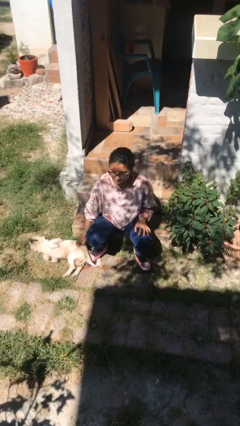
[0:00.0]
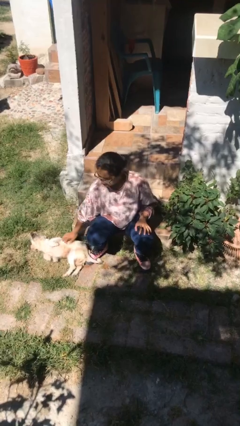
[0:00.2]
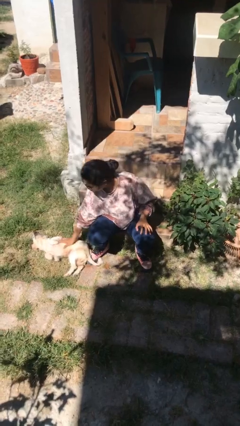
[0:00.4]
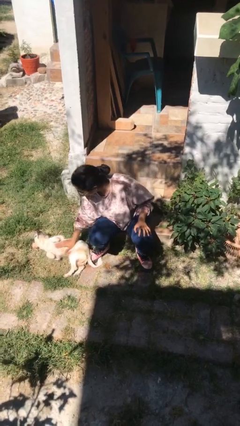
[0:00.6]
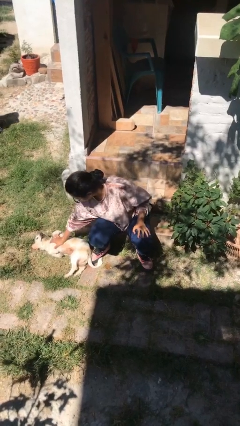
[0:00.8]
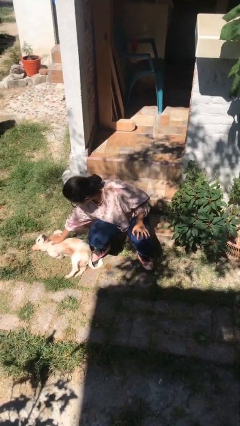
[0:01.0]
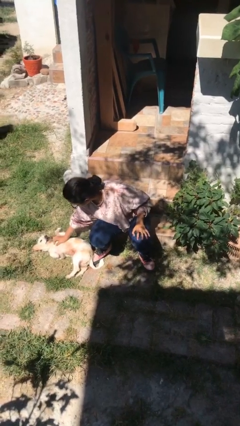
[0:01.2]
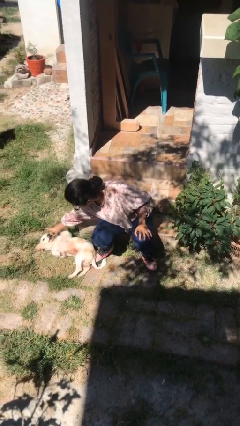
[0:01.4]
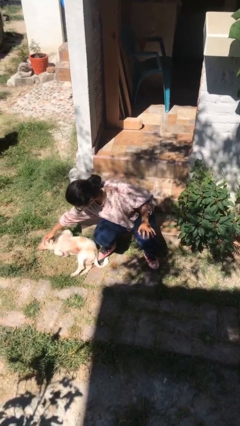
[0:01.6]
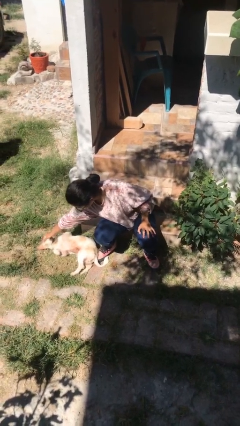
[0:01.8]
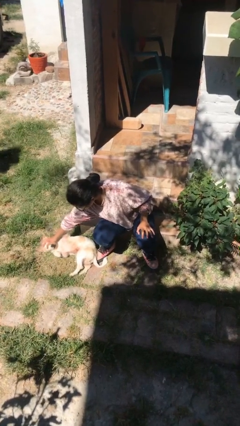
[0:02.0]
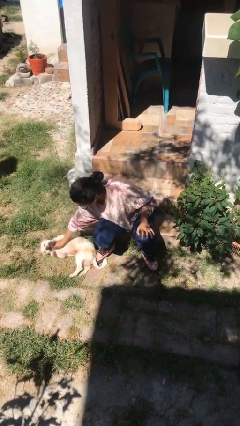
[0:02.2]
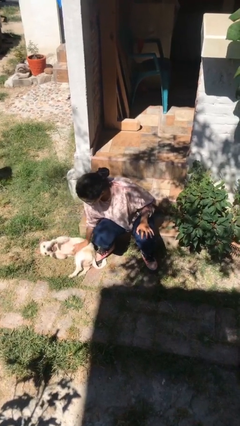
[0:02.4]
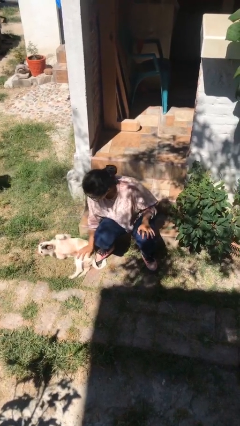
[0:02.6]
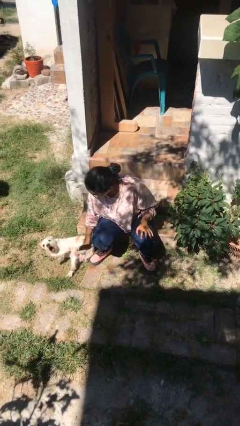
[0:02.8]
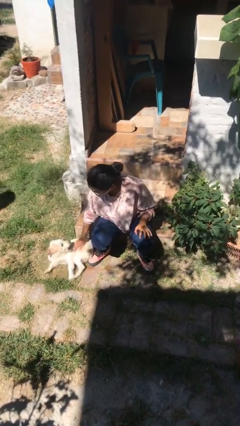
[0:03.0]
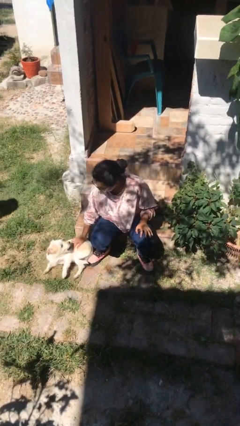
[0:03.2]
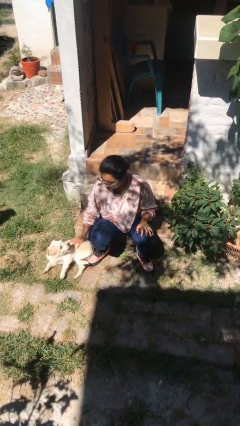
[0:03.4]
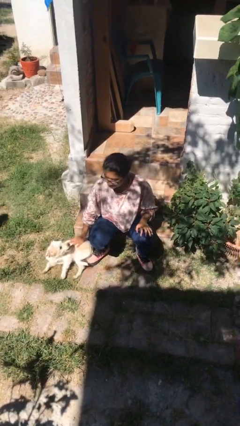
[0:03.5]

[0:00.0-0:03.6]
person pets dog

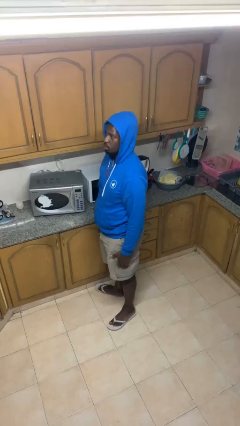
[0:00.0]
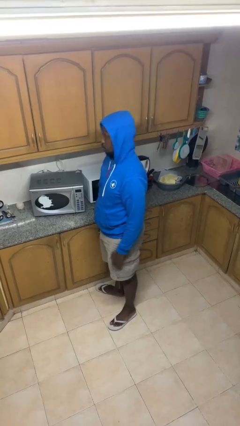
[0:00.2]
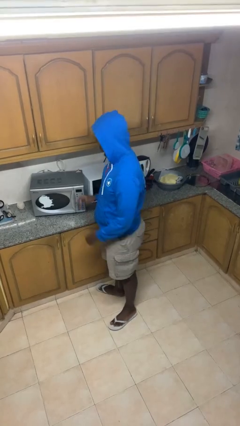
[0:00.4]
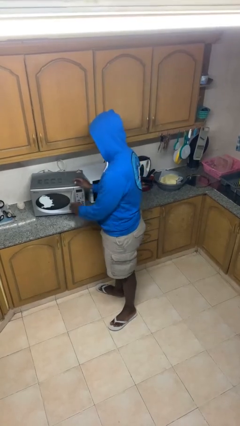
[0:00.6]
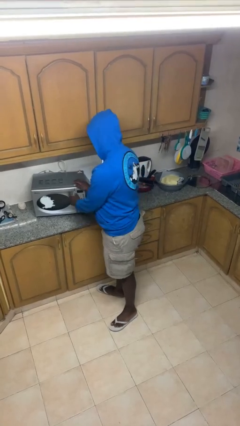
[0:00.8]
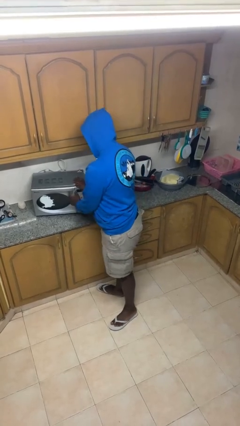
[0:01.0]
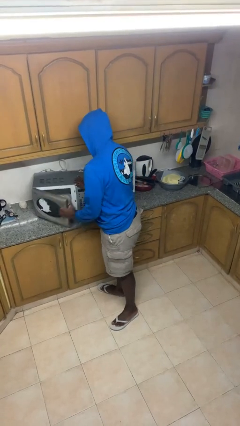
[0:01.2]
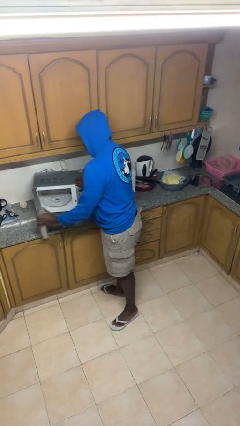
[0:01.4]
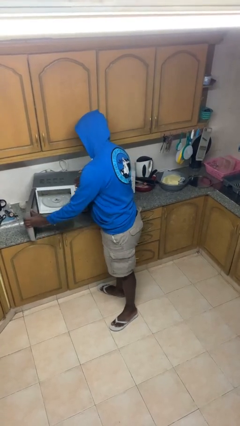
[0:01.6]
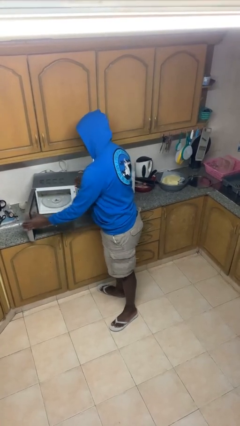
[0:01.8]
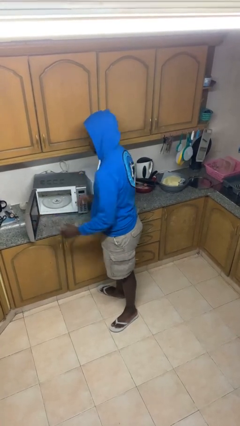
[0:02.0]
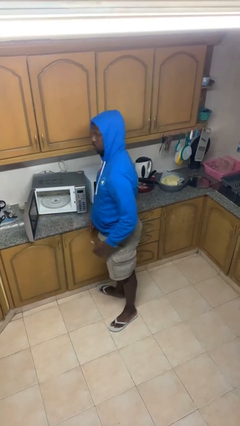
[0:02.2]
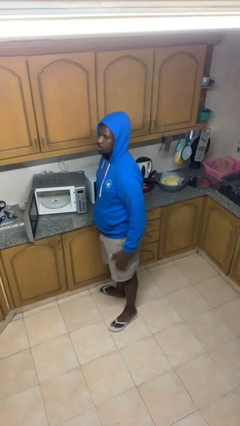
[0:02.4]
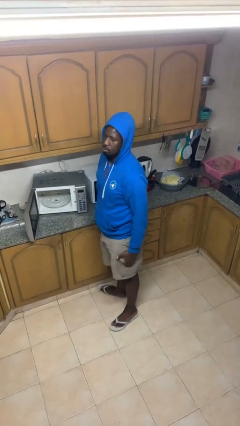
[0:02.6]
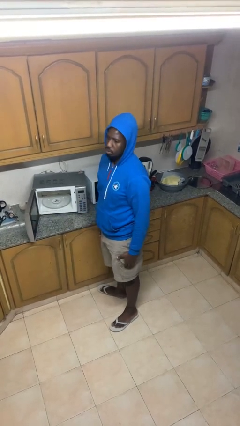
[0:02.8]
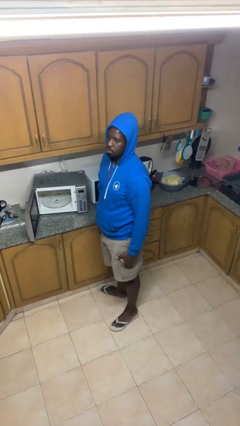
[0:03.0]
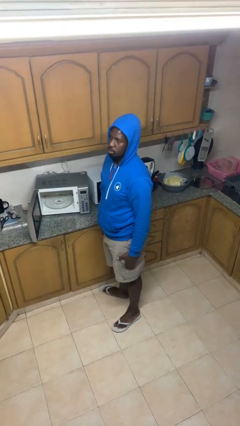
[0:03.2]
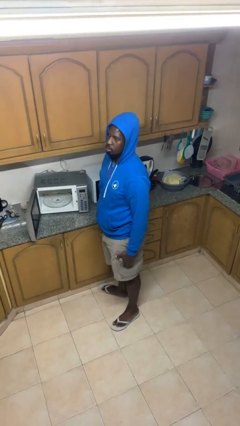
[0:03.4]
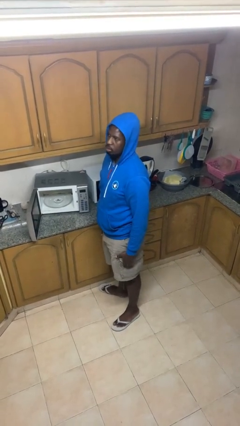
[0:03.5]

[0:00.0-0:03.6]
person opens microwave

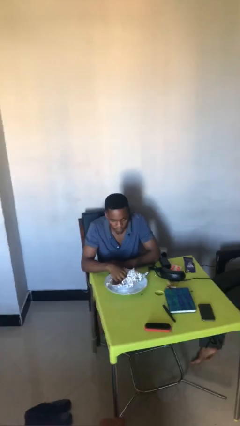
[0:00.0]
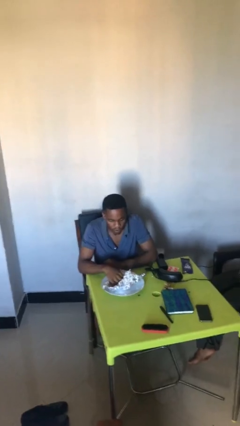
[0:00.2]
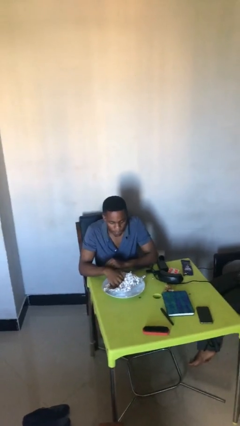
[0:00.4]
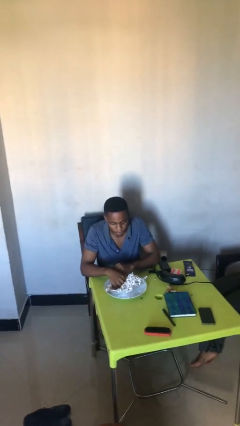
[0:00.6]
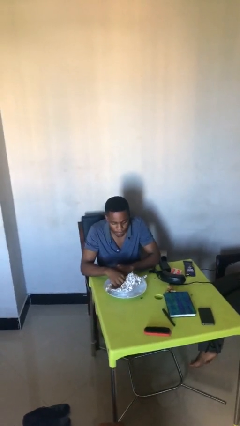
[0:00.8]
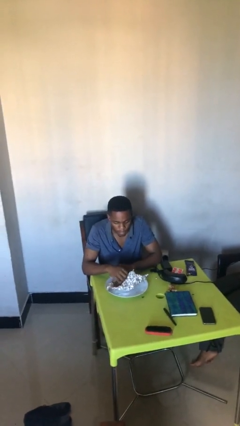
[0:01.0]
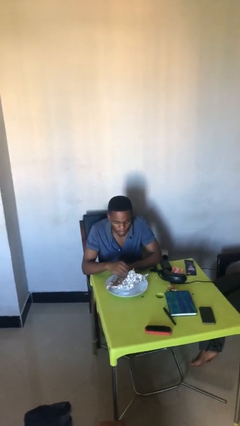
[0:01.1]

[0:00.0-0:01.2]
person licks fingers

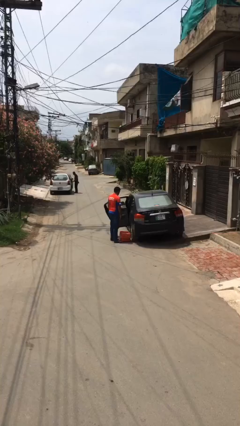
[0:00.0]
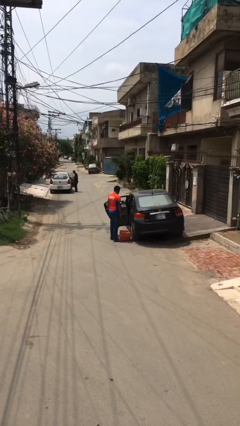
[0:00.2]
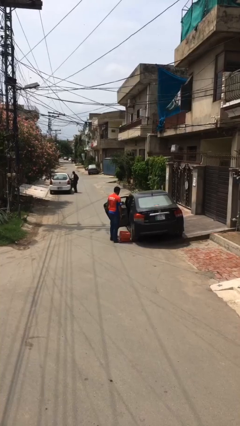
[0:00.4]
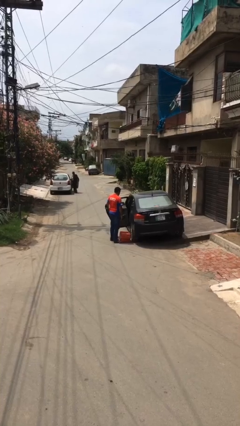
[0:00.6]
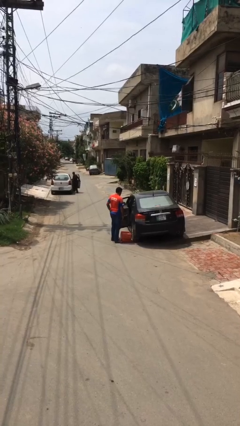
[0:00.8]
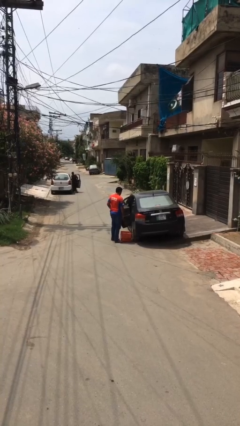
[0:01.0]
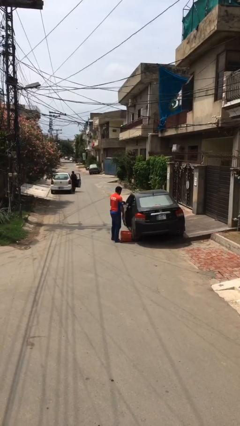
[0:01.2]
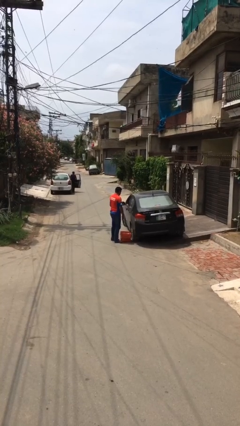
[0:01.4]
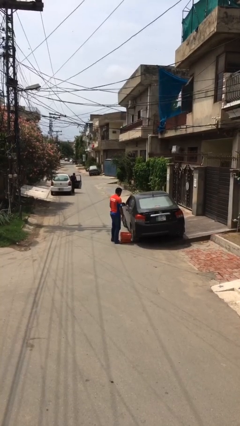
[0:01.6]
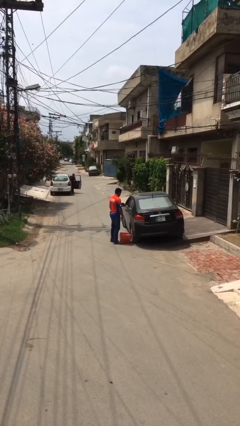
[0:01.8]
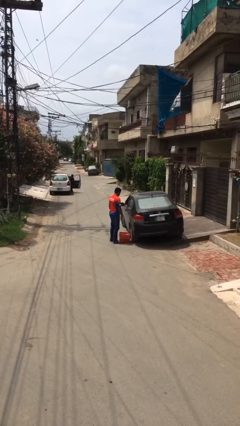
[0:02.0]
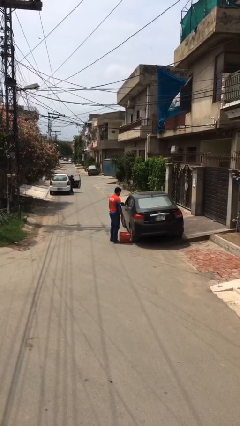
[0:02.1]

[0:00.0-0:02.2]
person closes car door

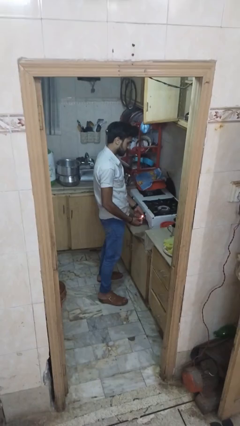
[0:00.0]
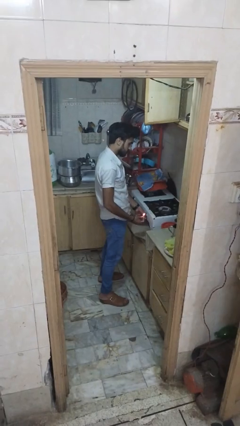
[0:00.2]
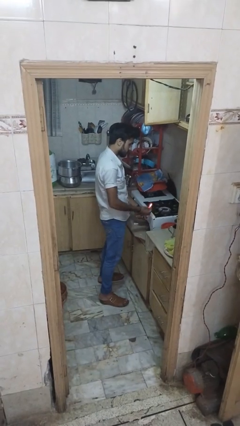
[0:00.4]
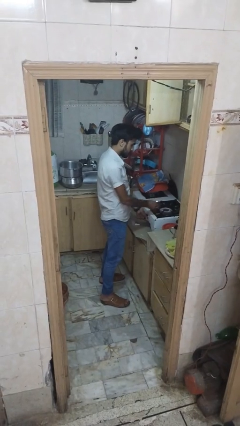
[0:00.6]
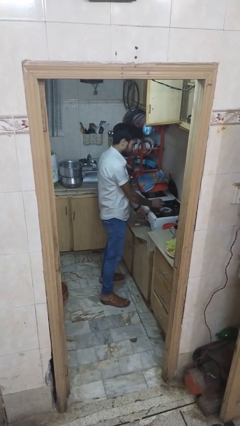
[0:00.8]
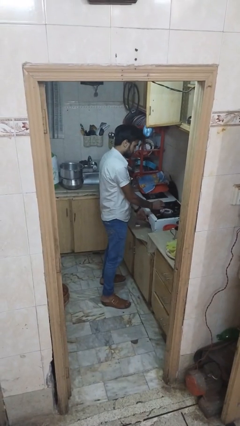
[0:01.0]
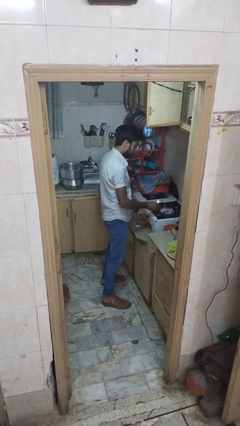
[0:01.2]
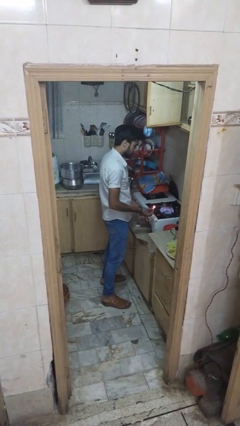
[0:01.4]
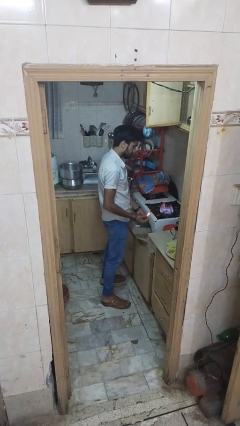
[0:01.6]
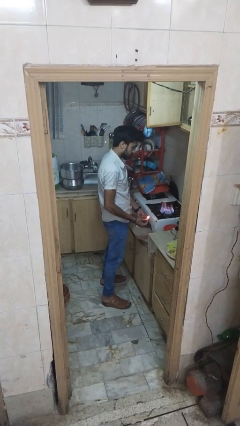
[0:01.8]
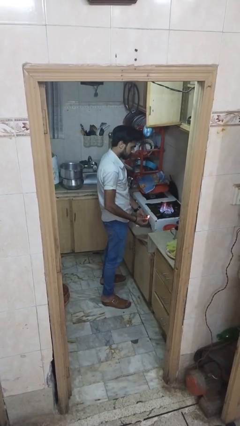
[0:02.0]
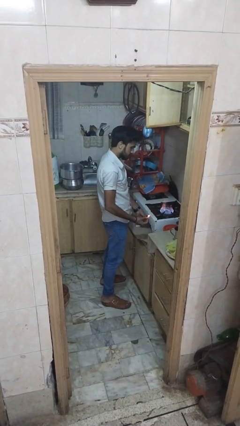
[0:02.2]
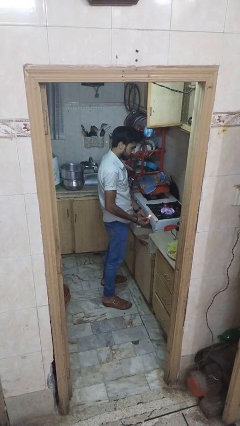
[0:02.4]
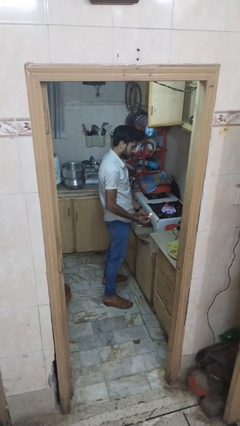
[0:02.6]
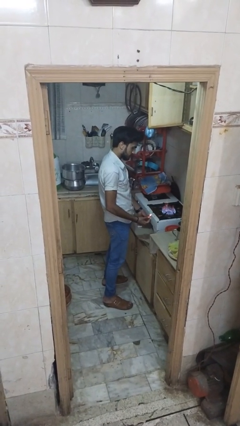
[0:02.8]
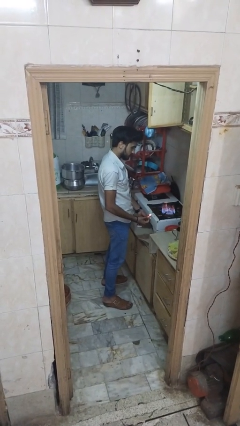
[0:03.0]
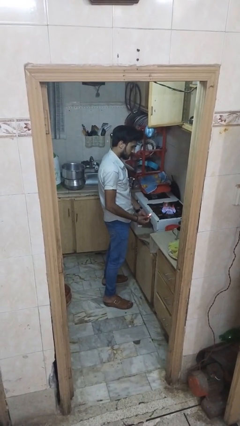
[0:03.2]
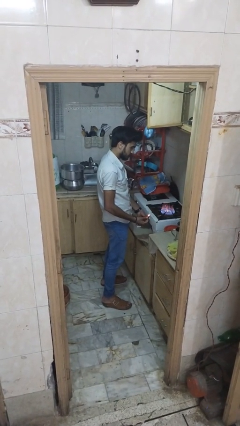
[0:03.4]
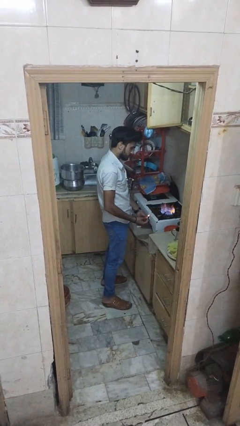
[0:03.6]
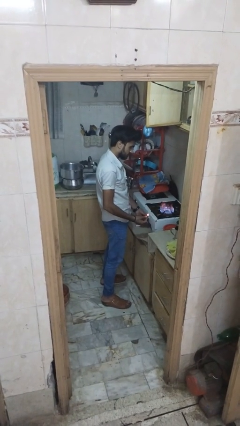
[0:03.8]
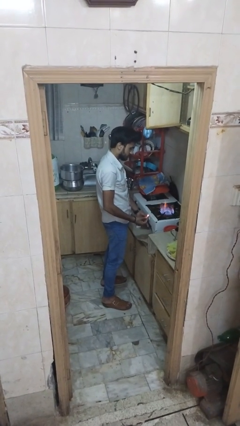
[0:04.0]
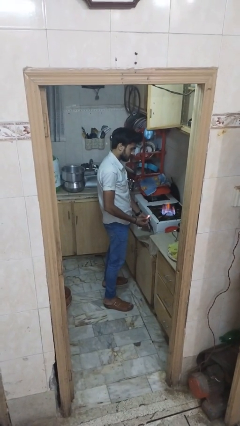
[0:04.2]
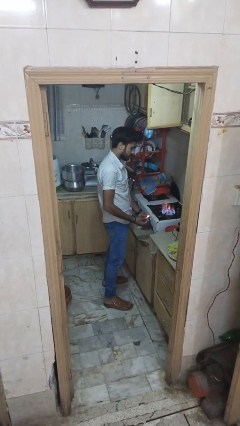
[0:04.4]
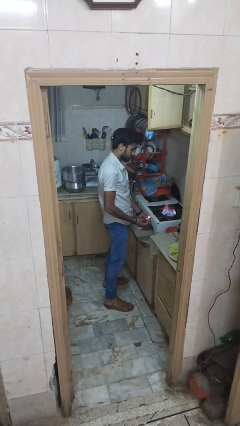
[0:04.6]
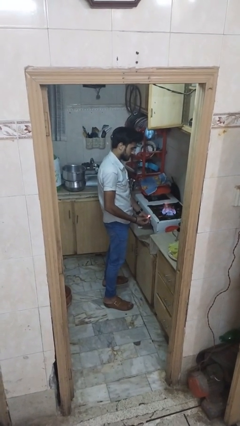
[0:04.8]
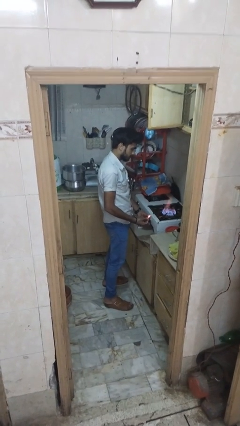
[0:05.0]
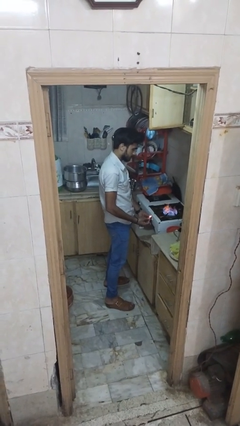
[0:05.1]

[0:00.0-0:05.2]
person turns on stovetop

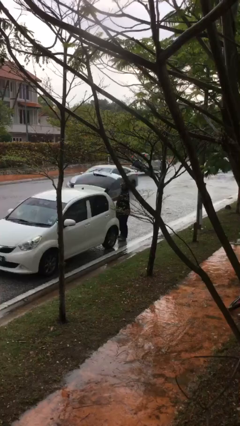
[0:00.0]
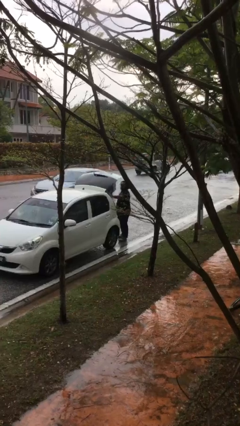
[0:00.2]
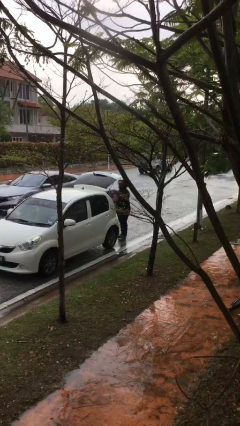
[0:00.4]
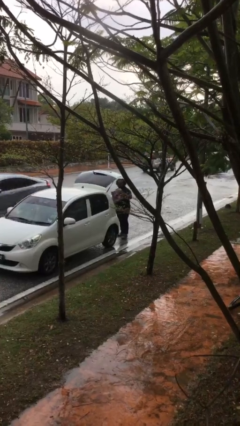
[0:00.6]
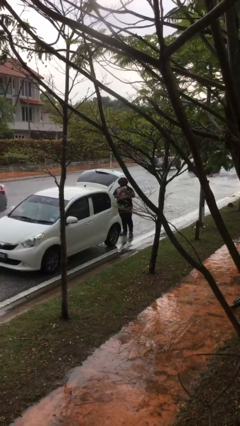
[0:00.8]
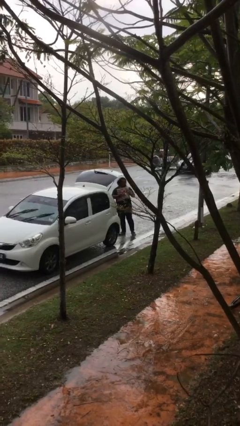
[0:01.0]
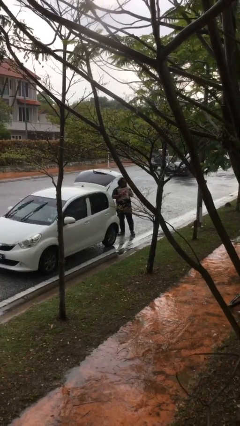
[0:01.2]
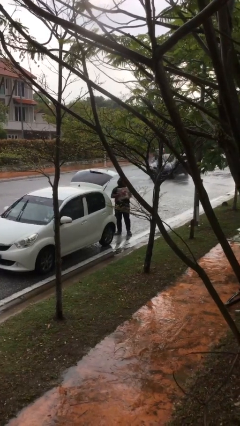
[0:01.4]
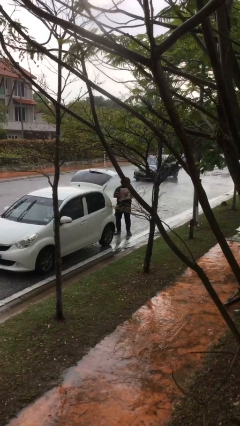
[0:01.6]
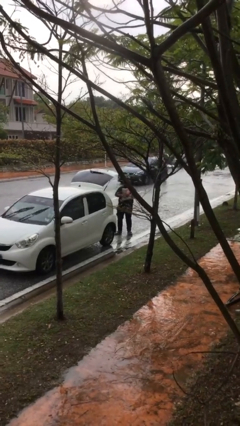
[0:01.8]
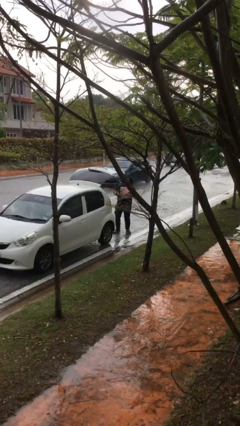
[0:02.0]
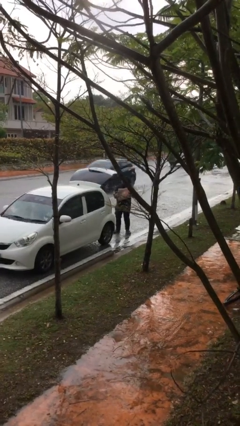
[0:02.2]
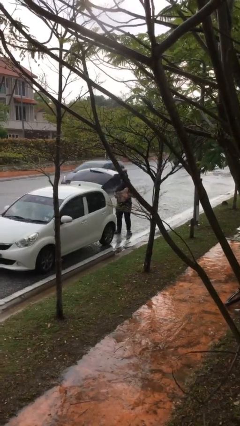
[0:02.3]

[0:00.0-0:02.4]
person unloads car
